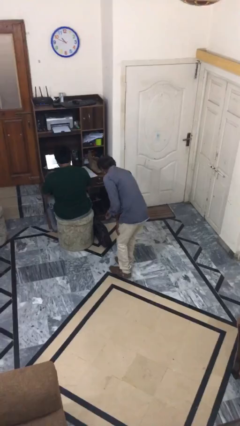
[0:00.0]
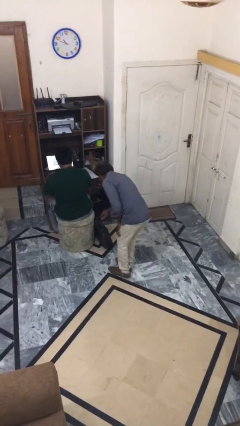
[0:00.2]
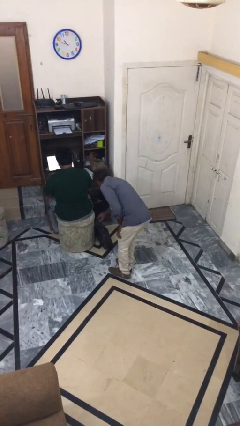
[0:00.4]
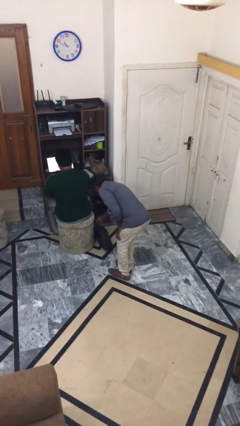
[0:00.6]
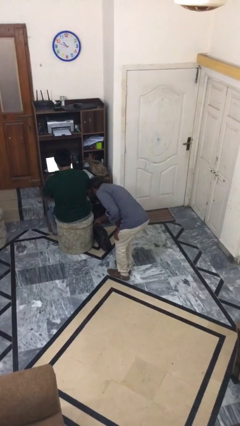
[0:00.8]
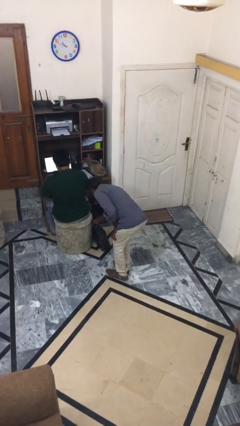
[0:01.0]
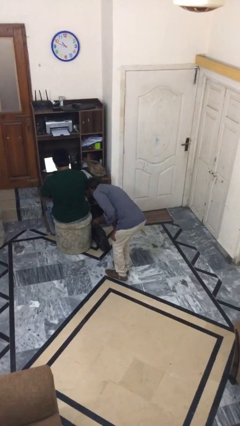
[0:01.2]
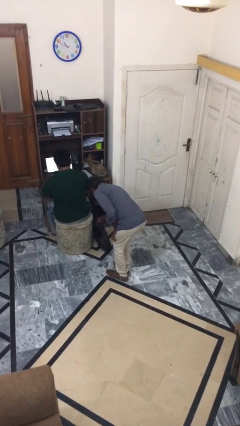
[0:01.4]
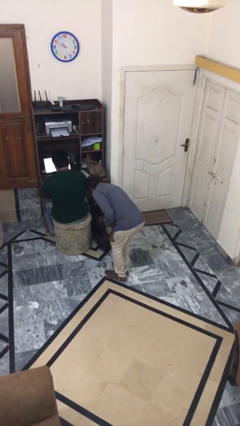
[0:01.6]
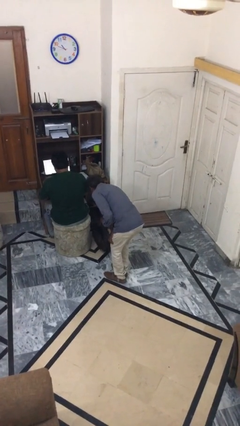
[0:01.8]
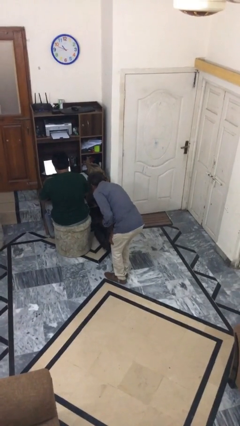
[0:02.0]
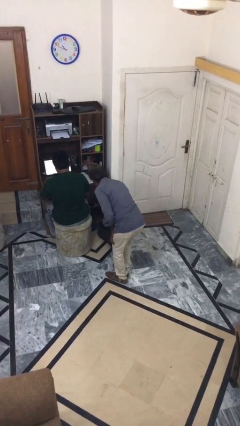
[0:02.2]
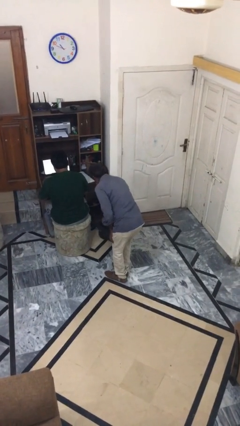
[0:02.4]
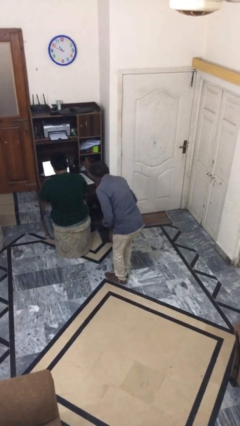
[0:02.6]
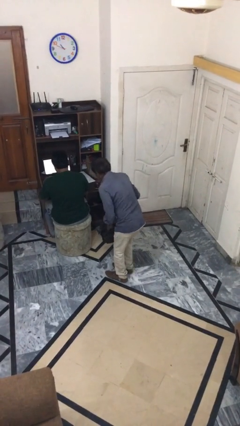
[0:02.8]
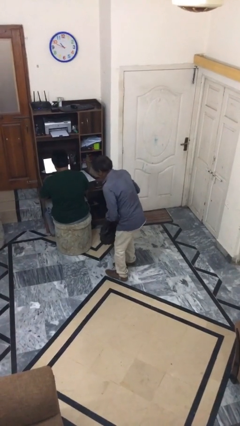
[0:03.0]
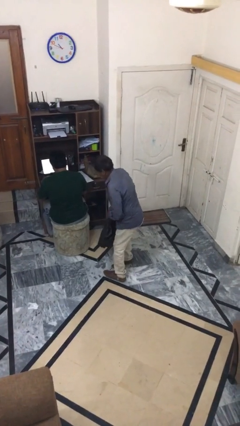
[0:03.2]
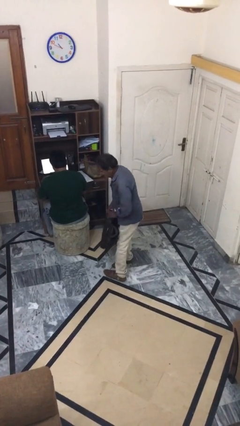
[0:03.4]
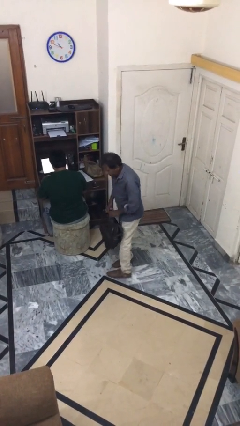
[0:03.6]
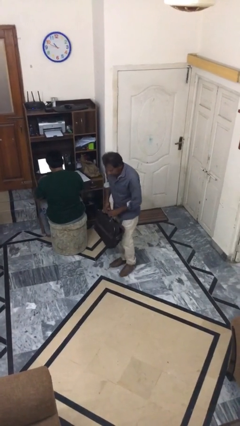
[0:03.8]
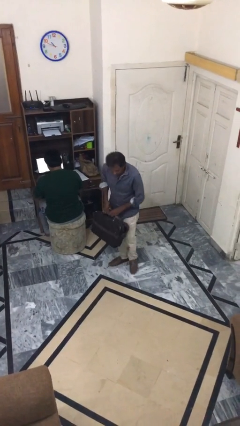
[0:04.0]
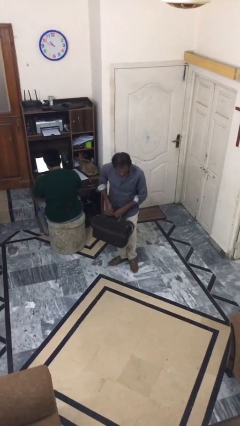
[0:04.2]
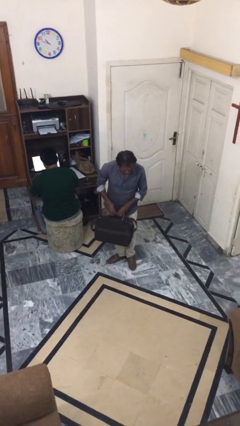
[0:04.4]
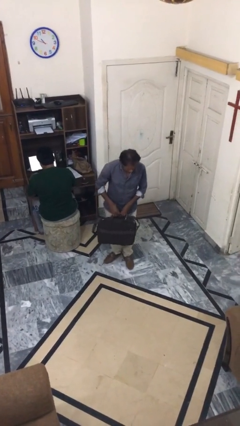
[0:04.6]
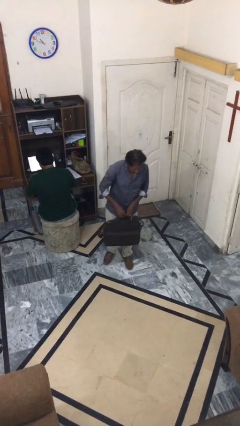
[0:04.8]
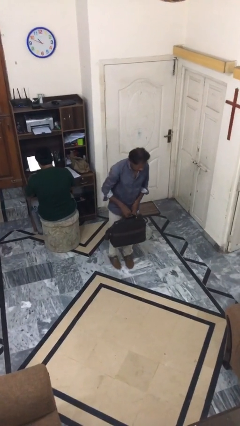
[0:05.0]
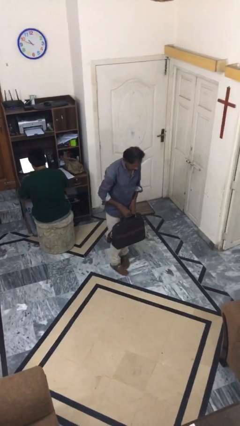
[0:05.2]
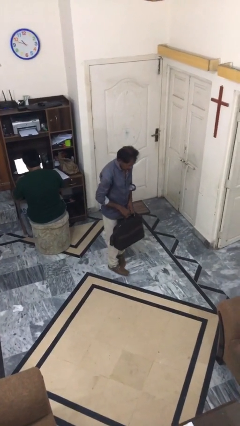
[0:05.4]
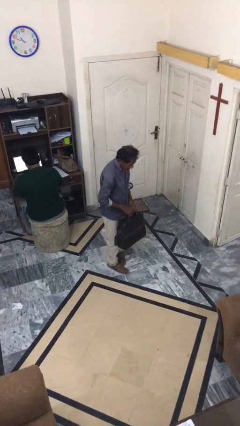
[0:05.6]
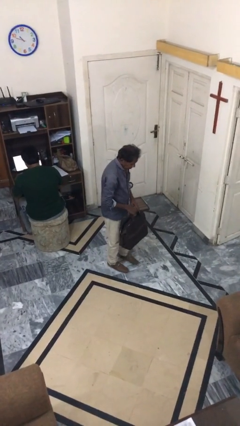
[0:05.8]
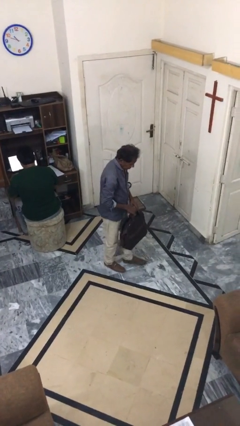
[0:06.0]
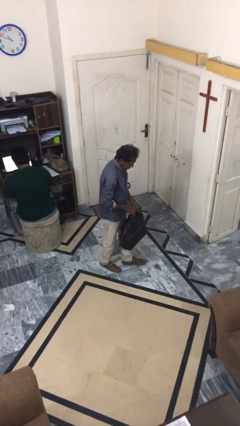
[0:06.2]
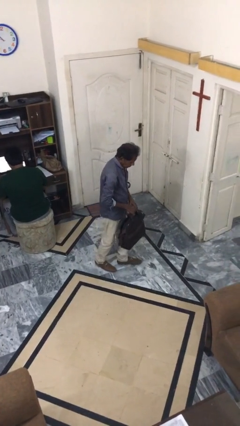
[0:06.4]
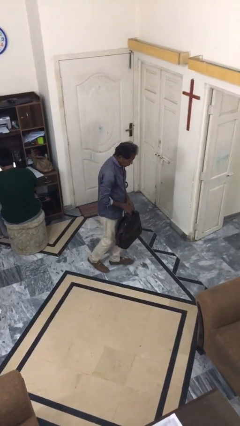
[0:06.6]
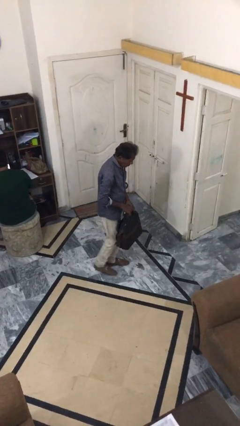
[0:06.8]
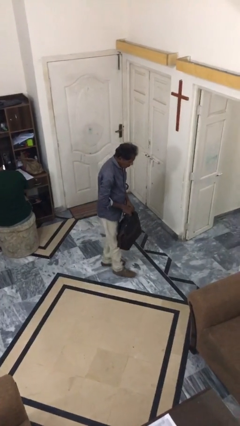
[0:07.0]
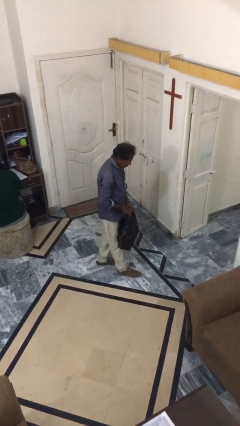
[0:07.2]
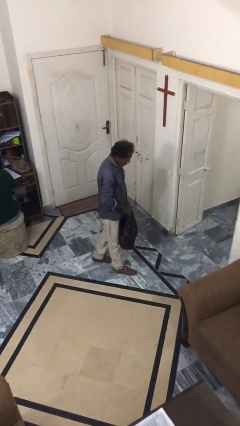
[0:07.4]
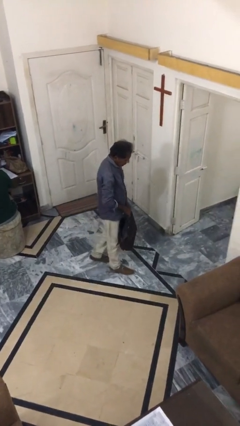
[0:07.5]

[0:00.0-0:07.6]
person steals object from person

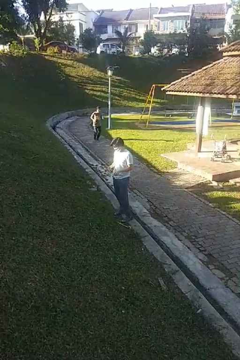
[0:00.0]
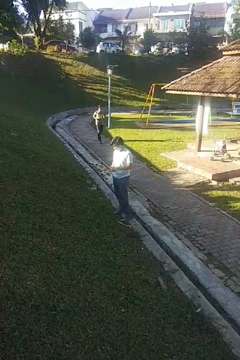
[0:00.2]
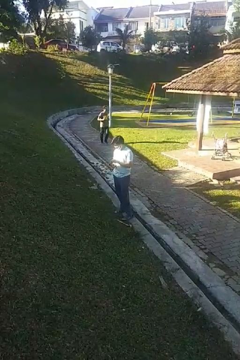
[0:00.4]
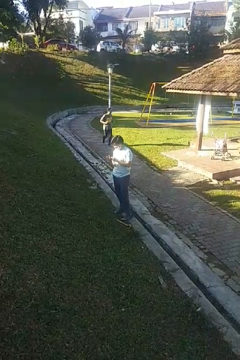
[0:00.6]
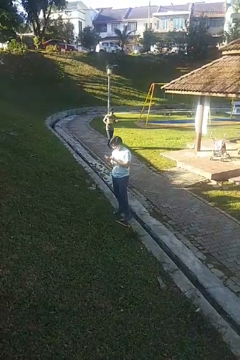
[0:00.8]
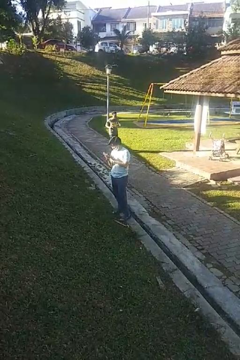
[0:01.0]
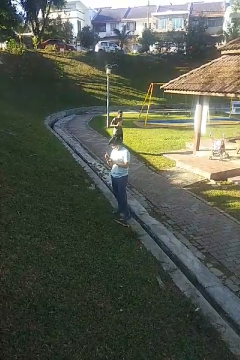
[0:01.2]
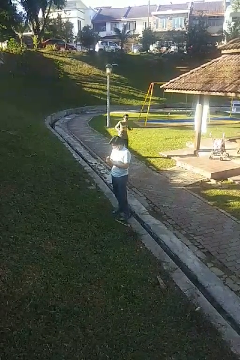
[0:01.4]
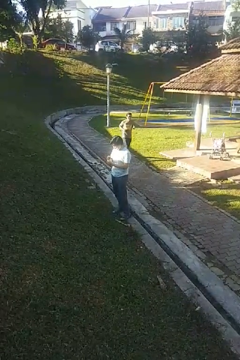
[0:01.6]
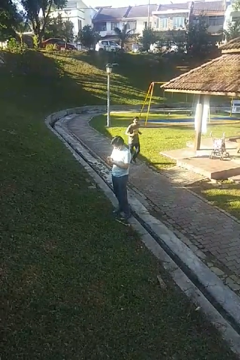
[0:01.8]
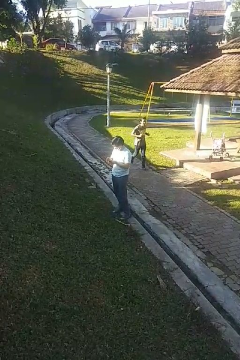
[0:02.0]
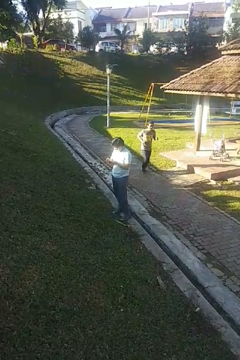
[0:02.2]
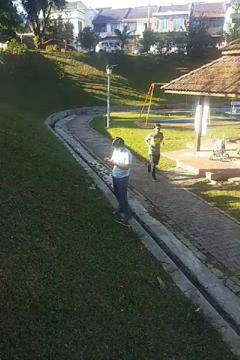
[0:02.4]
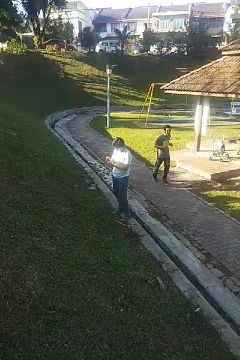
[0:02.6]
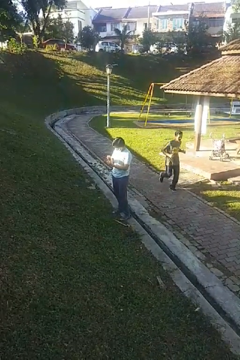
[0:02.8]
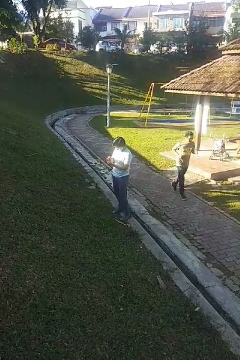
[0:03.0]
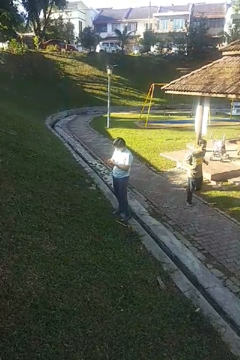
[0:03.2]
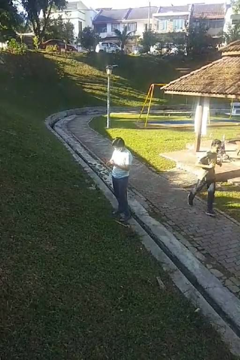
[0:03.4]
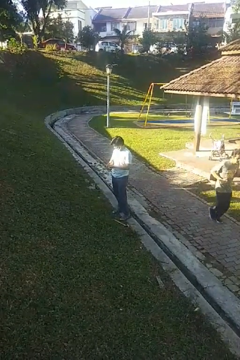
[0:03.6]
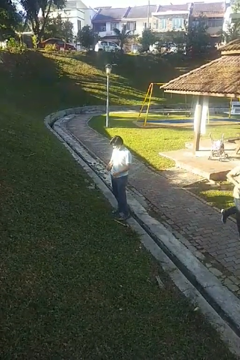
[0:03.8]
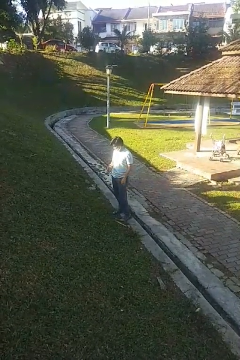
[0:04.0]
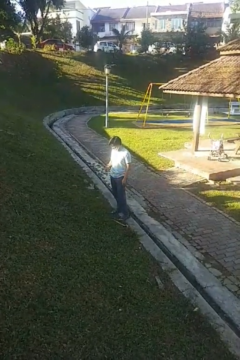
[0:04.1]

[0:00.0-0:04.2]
person puts on wristwatch

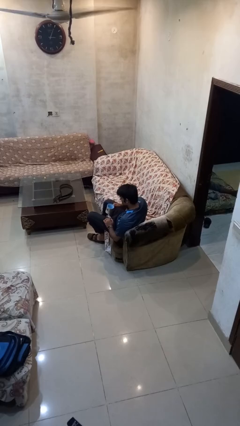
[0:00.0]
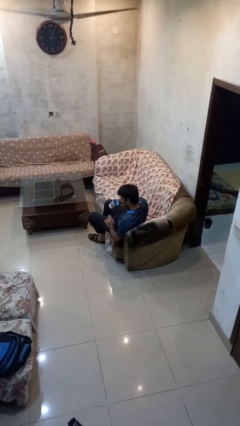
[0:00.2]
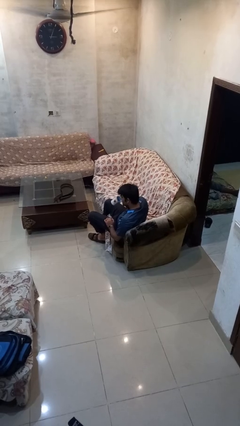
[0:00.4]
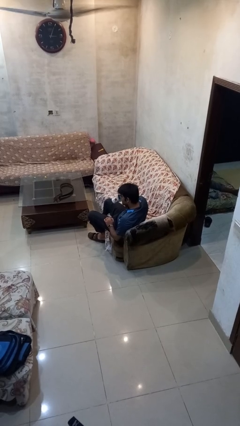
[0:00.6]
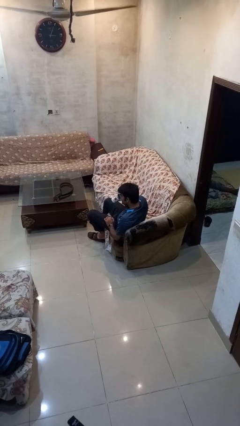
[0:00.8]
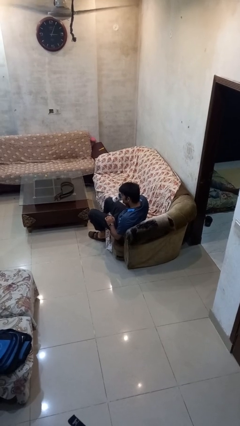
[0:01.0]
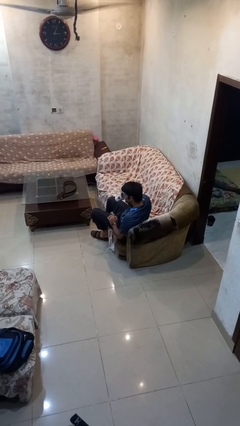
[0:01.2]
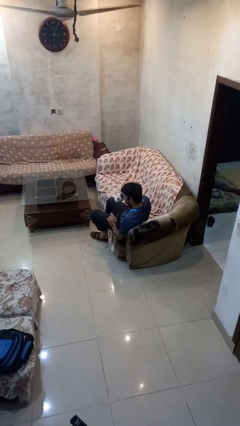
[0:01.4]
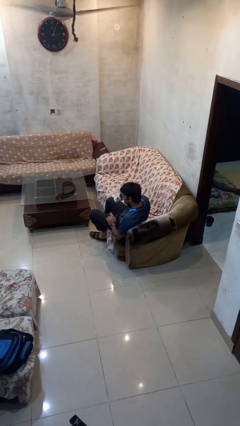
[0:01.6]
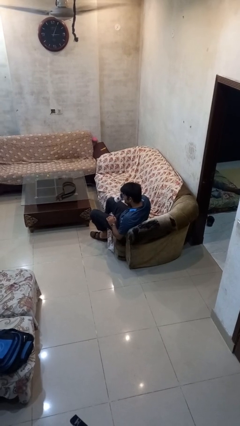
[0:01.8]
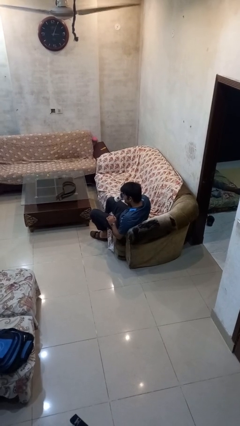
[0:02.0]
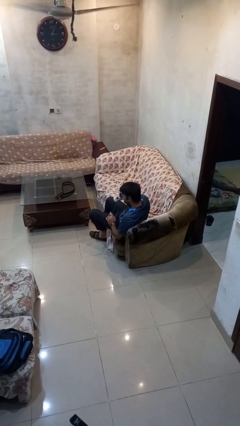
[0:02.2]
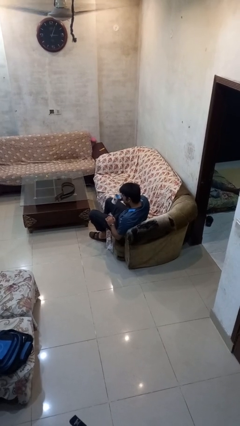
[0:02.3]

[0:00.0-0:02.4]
person drinks from mug

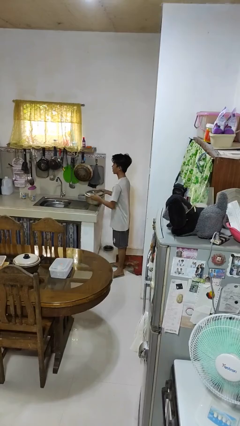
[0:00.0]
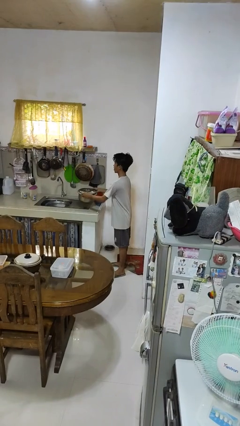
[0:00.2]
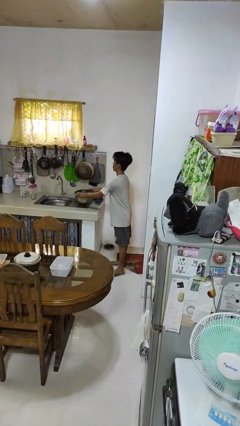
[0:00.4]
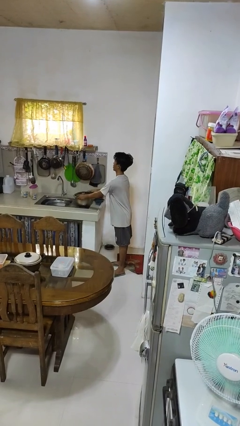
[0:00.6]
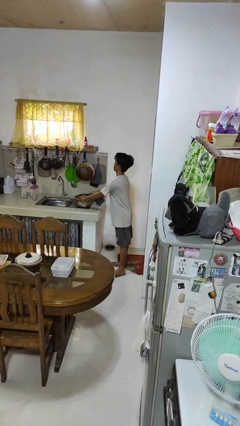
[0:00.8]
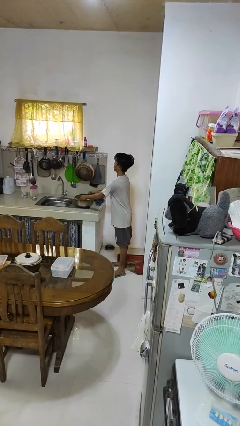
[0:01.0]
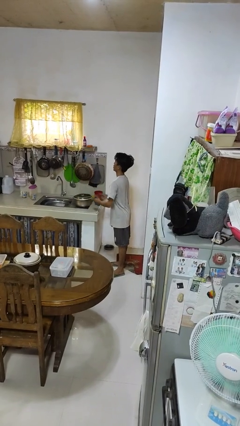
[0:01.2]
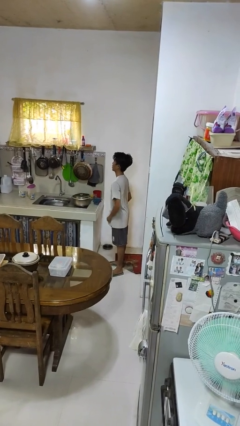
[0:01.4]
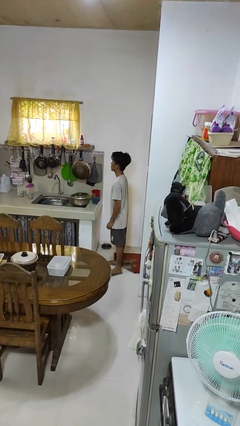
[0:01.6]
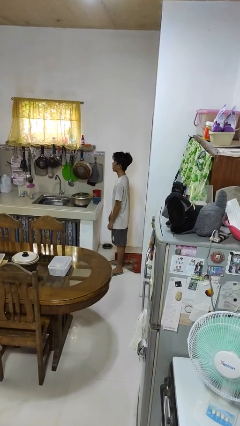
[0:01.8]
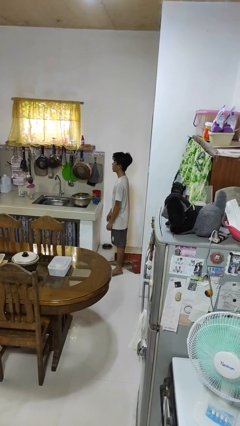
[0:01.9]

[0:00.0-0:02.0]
person puts down object on countertop

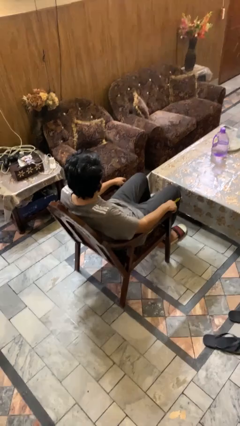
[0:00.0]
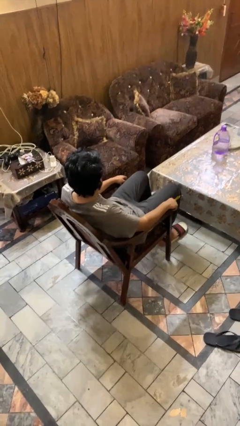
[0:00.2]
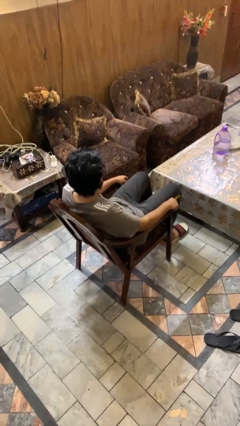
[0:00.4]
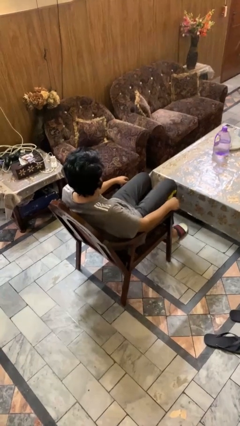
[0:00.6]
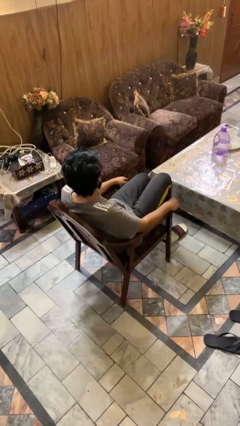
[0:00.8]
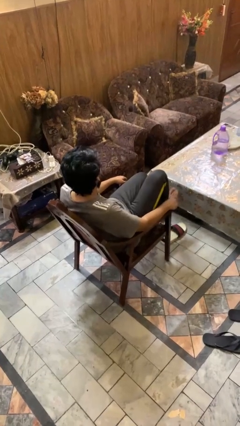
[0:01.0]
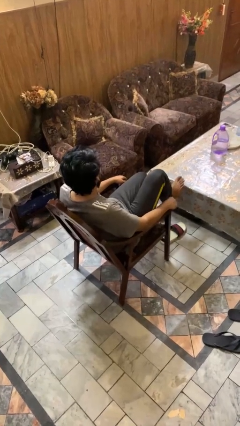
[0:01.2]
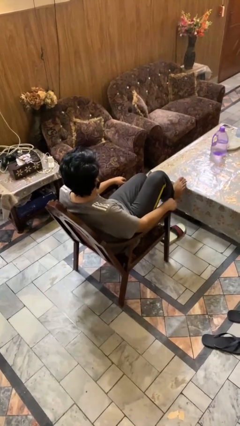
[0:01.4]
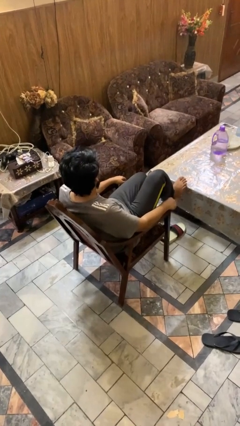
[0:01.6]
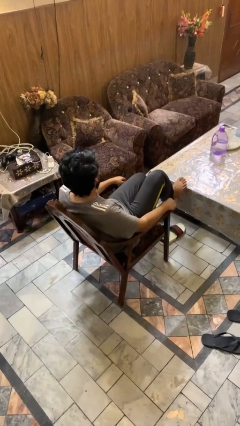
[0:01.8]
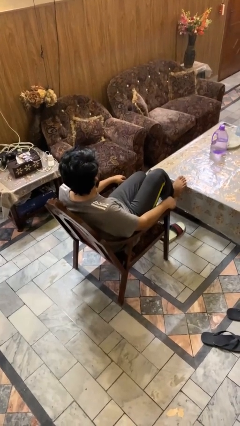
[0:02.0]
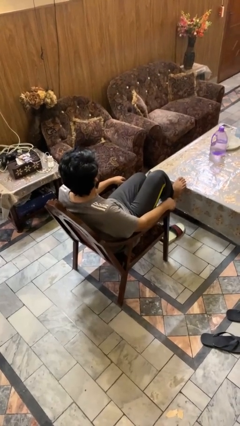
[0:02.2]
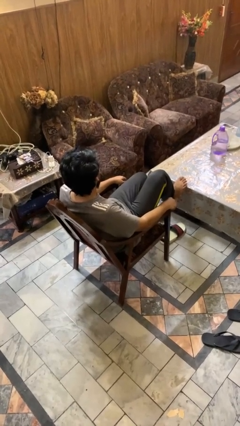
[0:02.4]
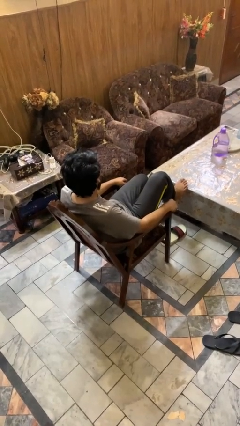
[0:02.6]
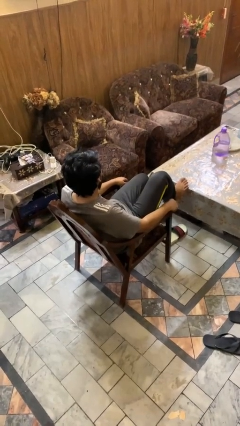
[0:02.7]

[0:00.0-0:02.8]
person puts feet up
